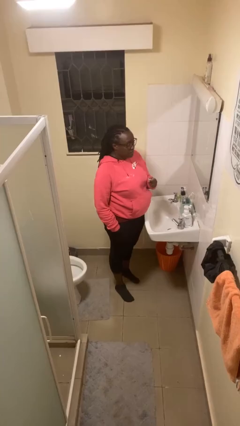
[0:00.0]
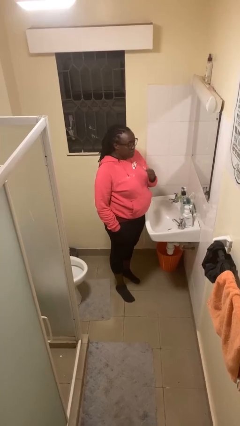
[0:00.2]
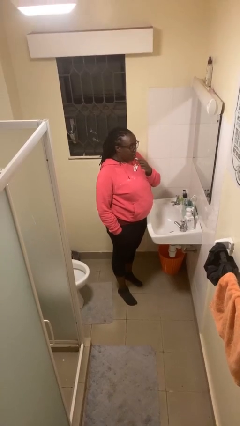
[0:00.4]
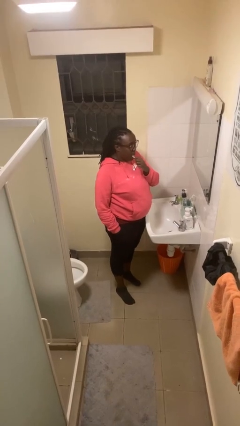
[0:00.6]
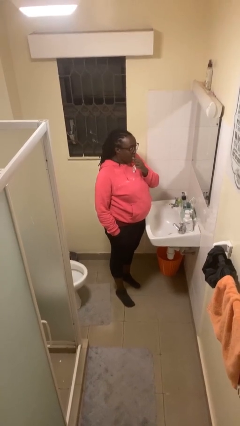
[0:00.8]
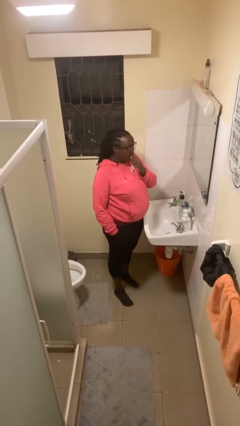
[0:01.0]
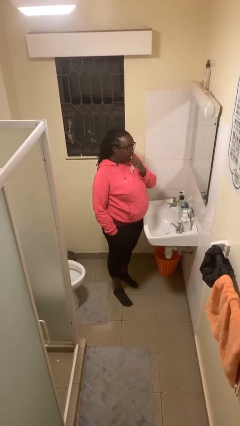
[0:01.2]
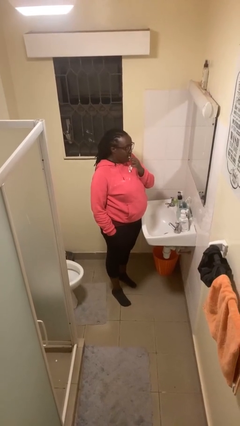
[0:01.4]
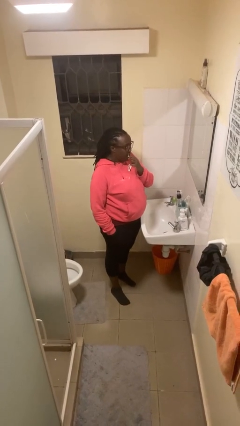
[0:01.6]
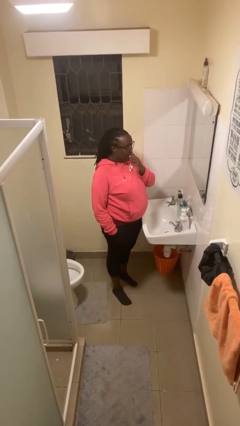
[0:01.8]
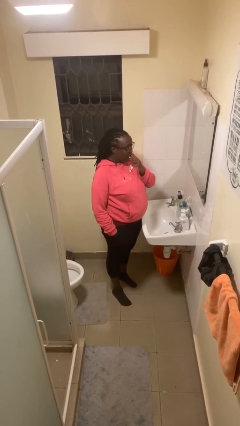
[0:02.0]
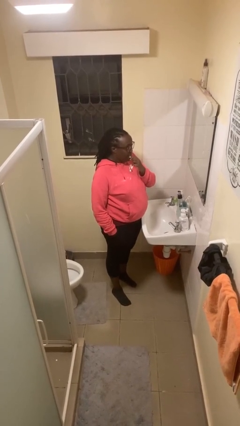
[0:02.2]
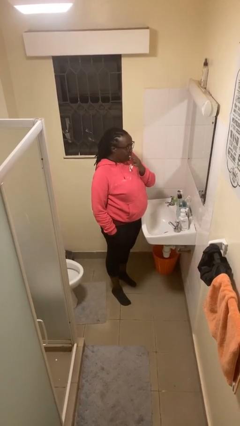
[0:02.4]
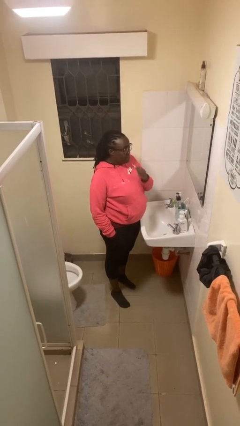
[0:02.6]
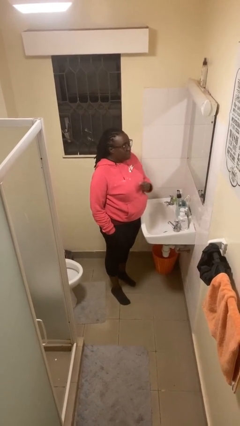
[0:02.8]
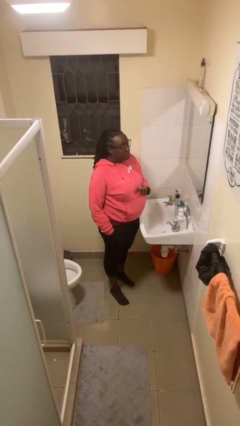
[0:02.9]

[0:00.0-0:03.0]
person flosses

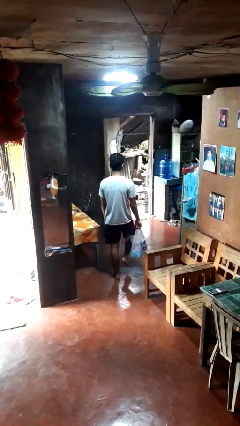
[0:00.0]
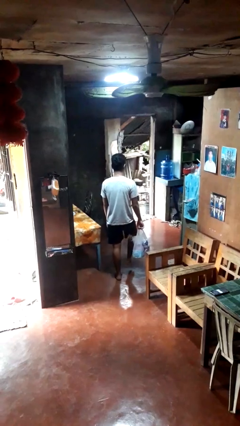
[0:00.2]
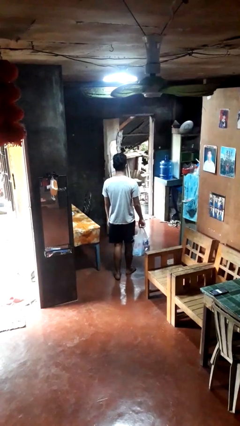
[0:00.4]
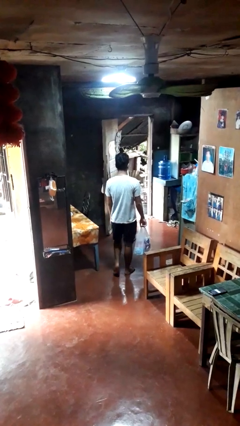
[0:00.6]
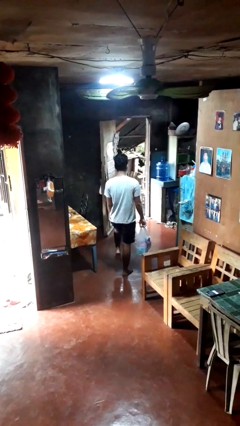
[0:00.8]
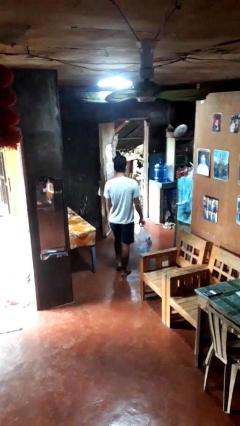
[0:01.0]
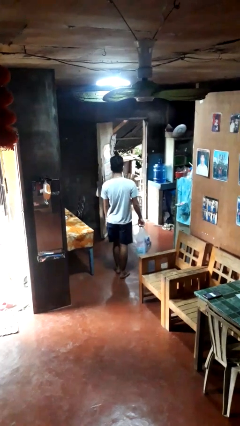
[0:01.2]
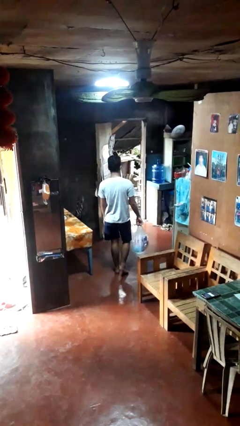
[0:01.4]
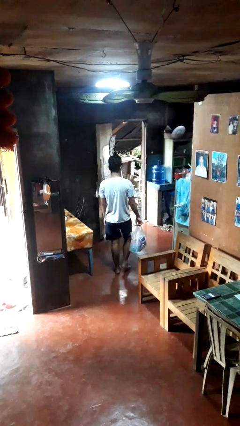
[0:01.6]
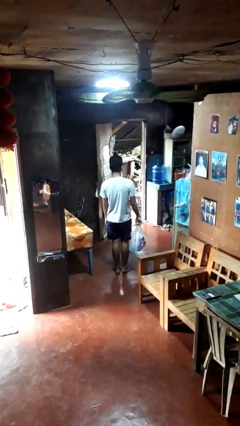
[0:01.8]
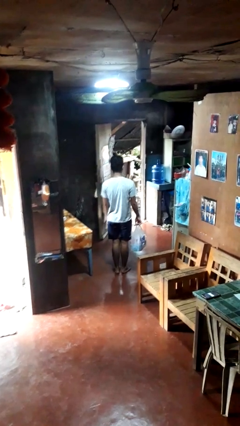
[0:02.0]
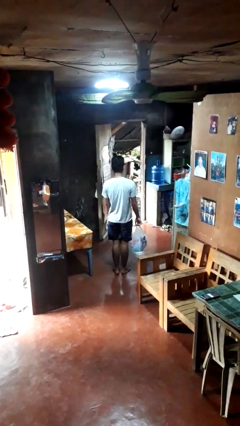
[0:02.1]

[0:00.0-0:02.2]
person carries groceries

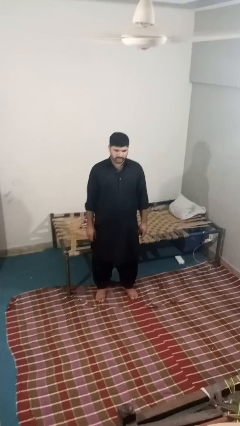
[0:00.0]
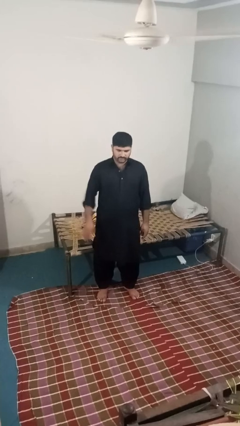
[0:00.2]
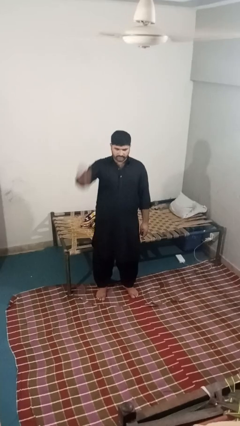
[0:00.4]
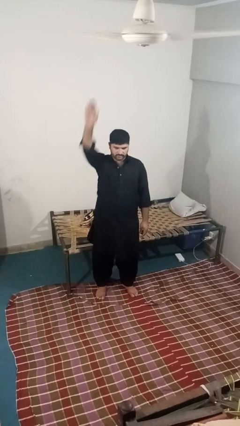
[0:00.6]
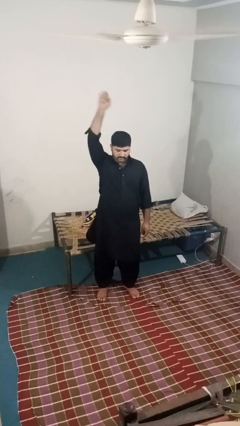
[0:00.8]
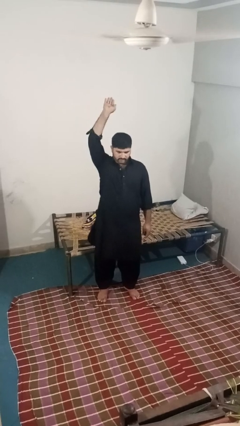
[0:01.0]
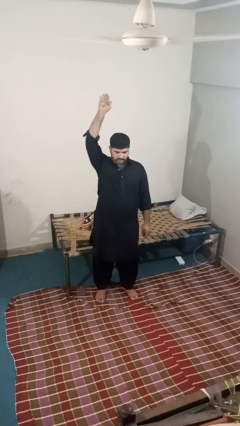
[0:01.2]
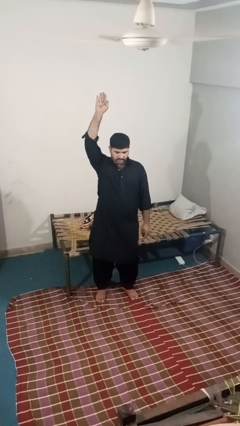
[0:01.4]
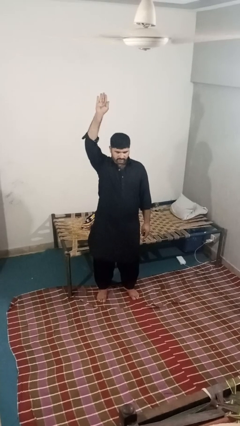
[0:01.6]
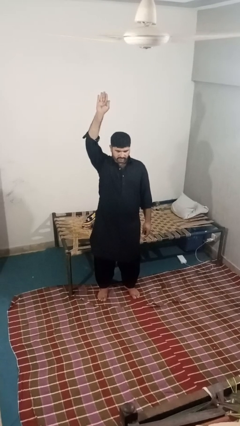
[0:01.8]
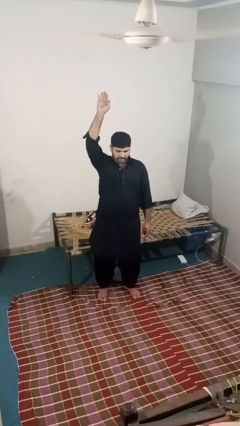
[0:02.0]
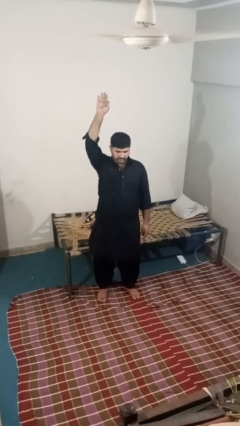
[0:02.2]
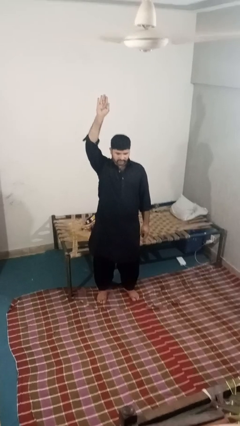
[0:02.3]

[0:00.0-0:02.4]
person gestures raise hand

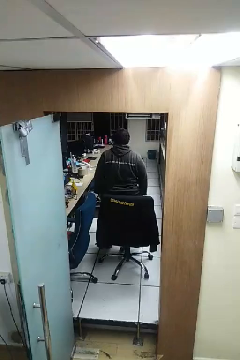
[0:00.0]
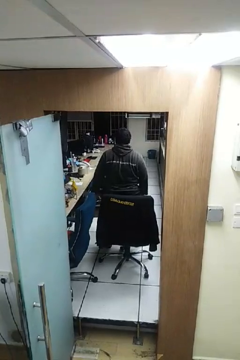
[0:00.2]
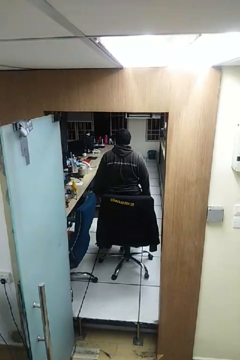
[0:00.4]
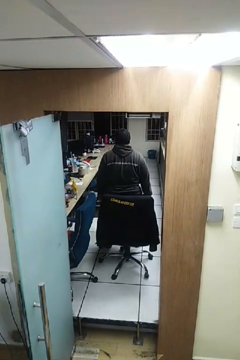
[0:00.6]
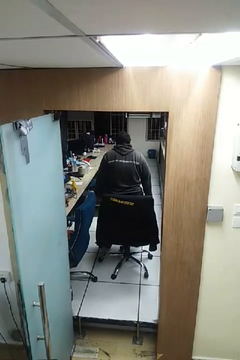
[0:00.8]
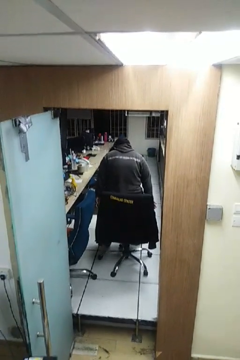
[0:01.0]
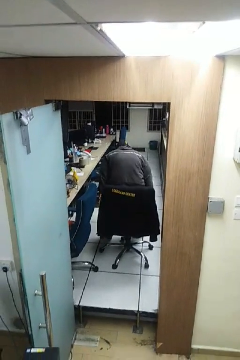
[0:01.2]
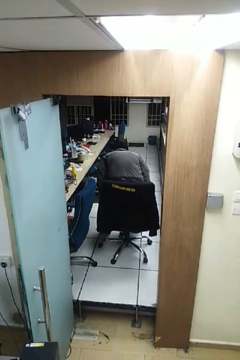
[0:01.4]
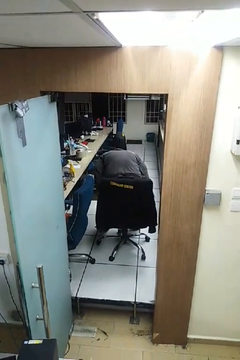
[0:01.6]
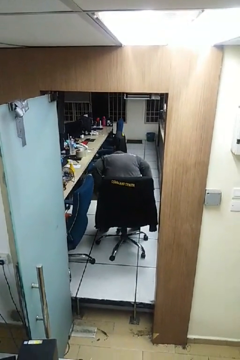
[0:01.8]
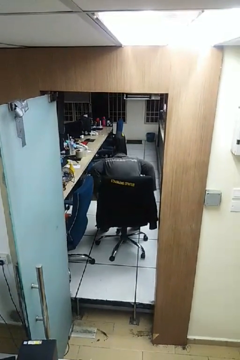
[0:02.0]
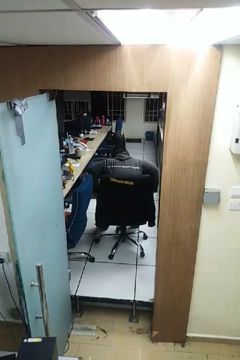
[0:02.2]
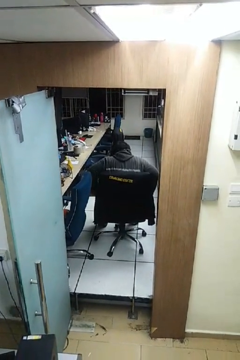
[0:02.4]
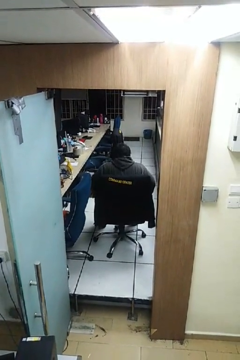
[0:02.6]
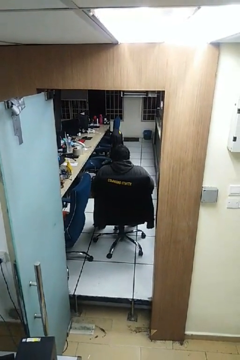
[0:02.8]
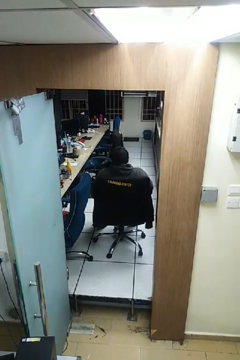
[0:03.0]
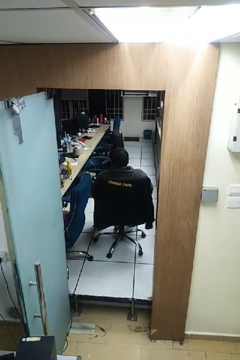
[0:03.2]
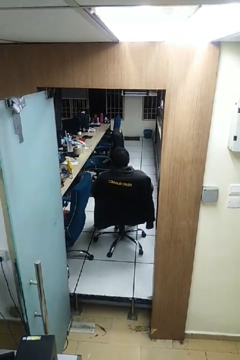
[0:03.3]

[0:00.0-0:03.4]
person sits down

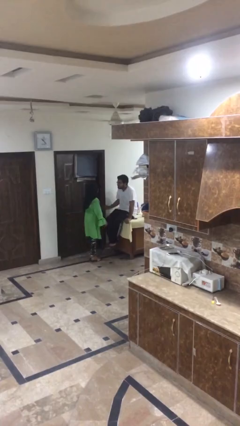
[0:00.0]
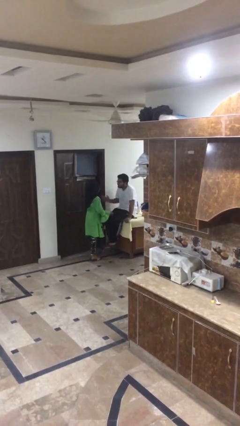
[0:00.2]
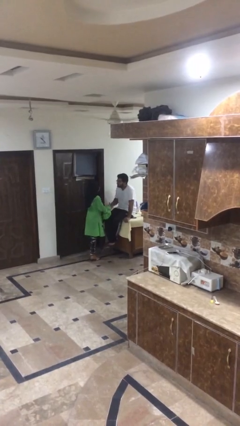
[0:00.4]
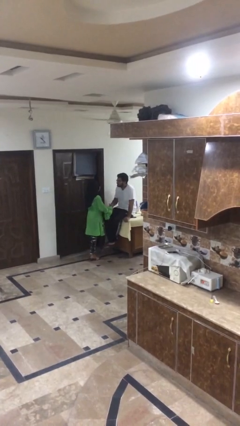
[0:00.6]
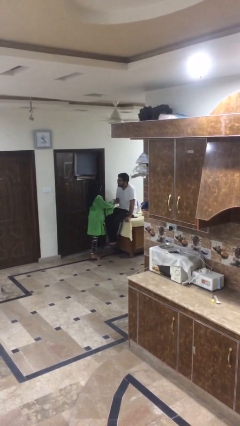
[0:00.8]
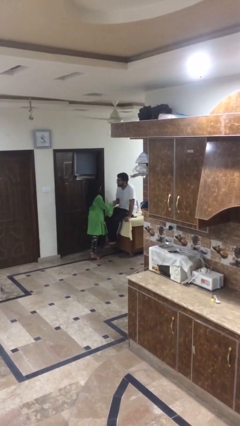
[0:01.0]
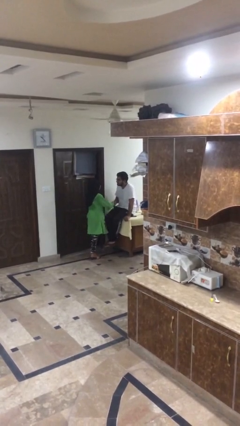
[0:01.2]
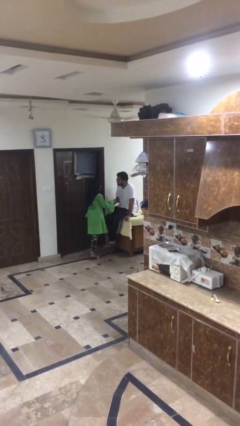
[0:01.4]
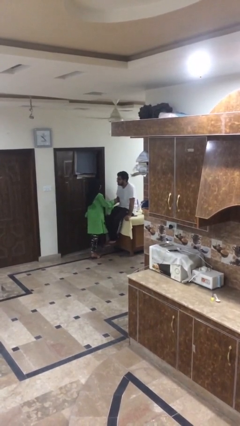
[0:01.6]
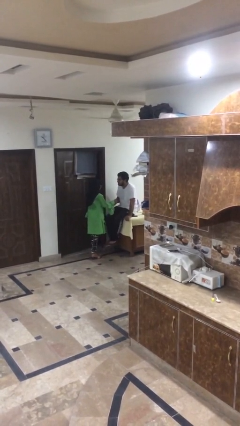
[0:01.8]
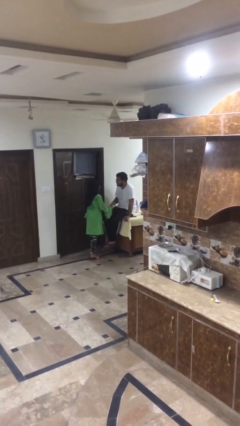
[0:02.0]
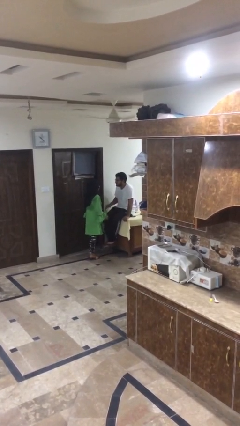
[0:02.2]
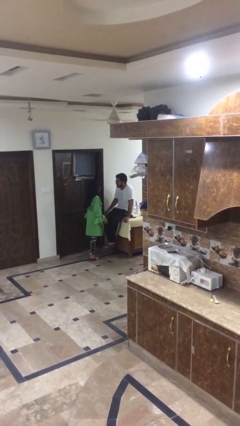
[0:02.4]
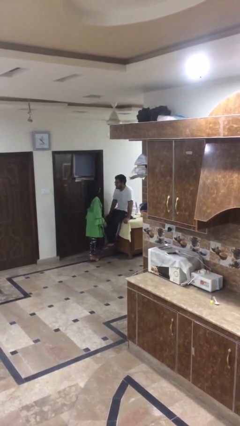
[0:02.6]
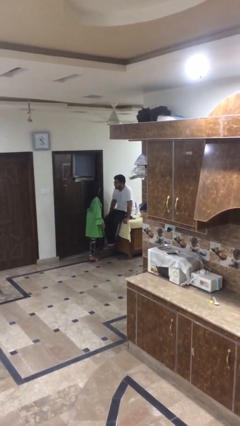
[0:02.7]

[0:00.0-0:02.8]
person shakes hand

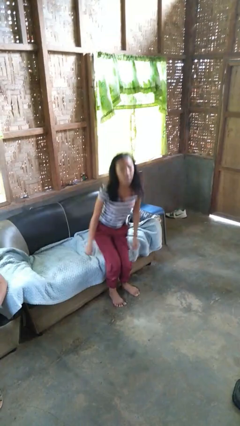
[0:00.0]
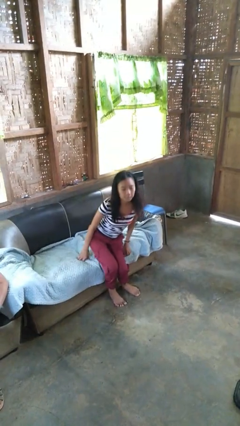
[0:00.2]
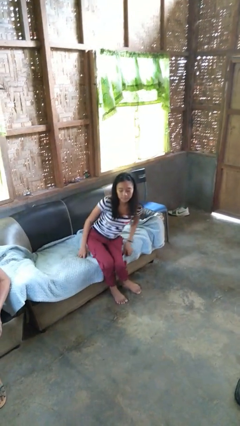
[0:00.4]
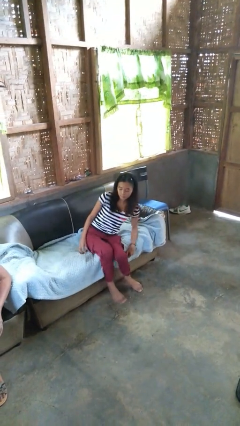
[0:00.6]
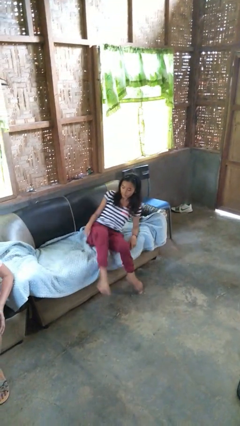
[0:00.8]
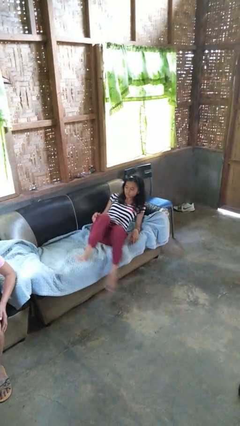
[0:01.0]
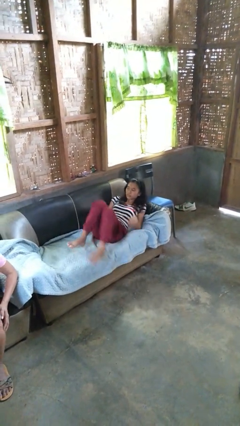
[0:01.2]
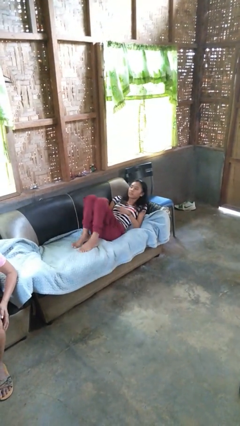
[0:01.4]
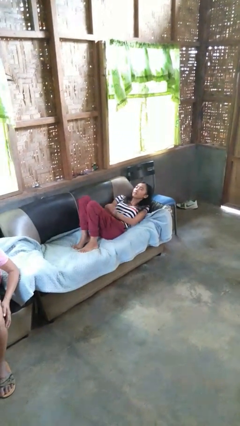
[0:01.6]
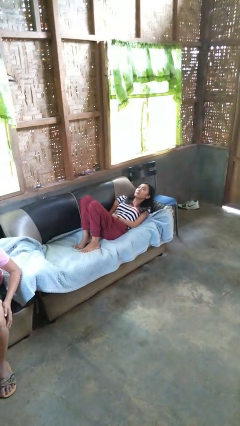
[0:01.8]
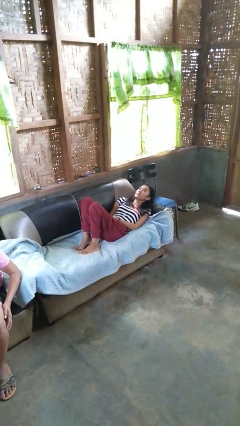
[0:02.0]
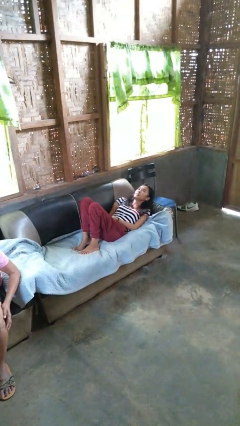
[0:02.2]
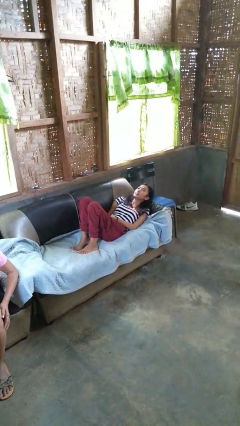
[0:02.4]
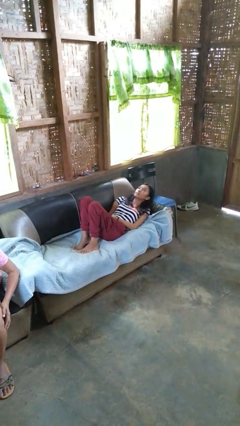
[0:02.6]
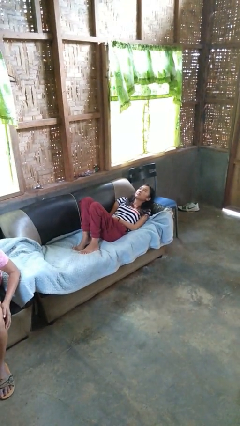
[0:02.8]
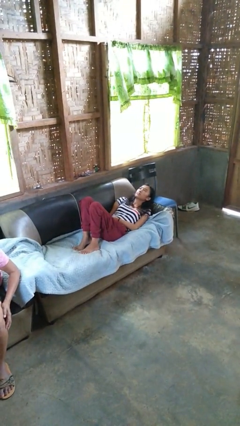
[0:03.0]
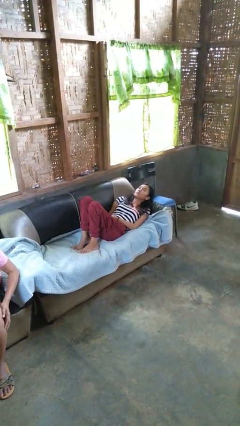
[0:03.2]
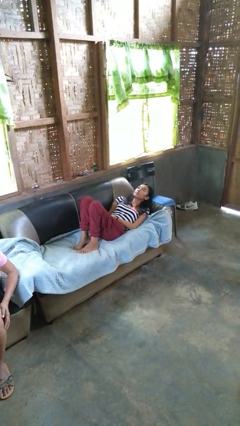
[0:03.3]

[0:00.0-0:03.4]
person lies down on couch

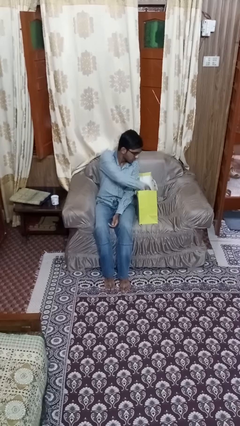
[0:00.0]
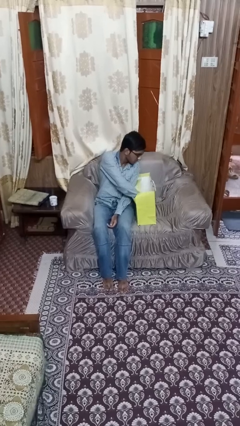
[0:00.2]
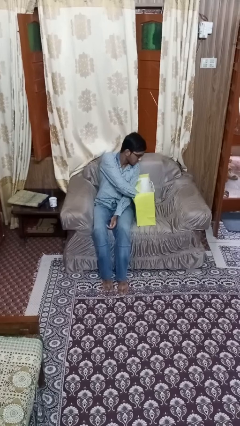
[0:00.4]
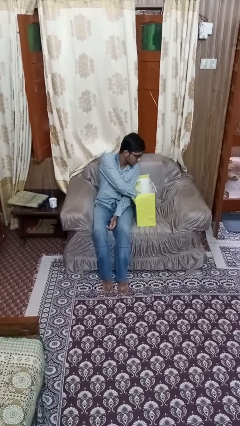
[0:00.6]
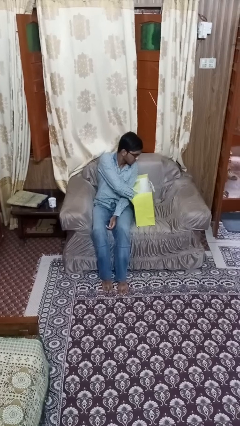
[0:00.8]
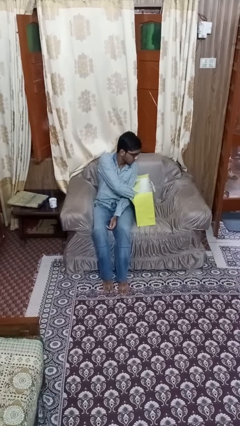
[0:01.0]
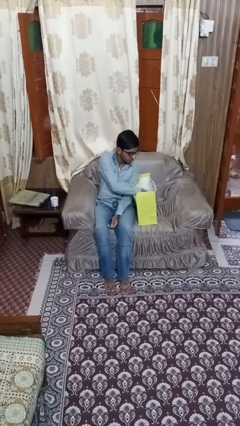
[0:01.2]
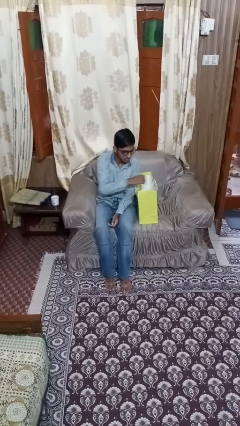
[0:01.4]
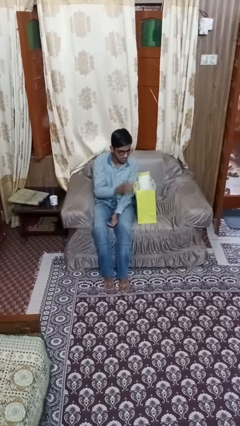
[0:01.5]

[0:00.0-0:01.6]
person searches in bag
